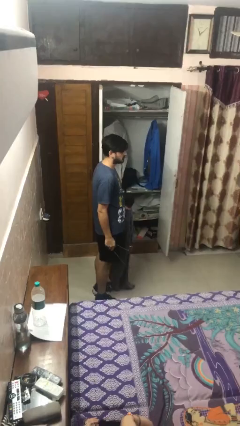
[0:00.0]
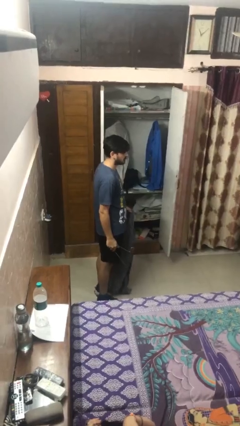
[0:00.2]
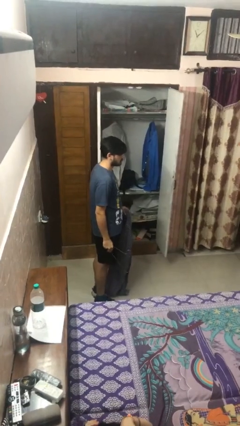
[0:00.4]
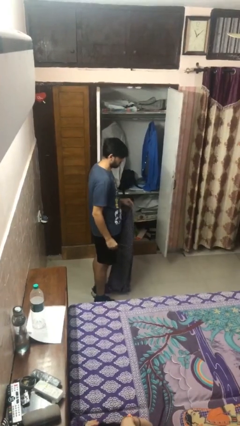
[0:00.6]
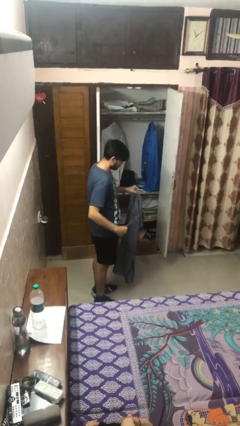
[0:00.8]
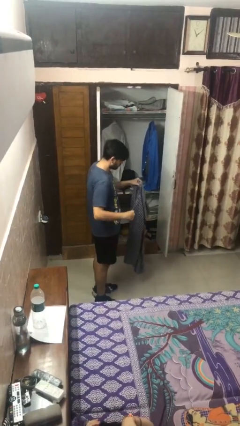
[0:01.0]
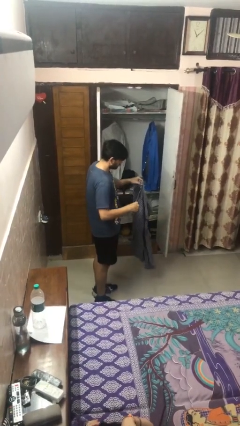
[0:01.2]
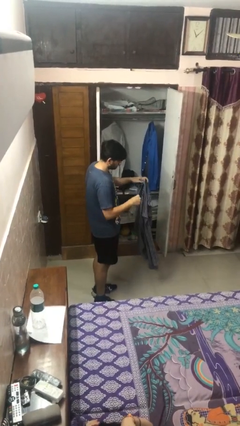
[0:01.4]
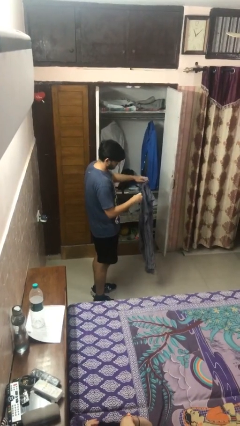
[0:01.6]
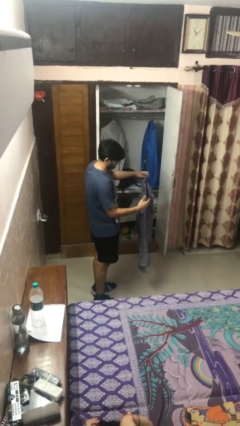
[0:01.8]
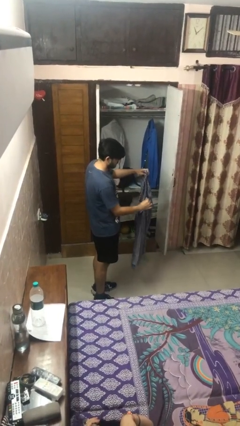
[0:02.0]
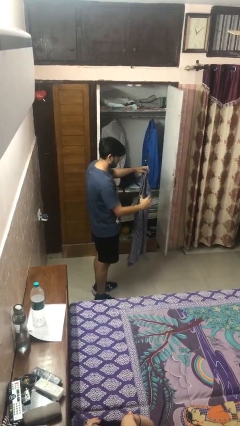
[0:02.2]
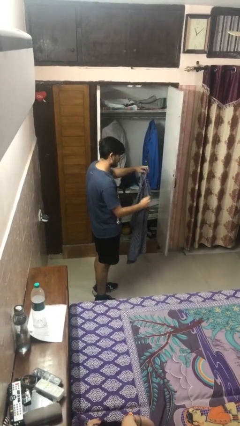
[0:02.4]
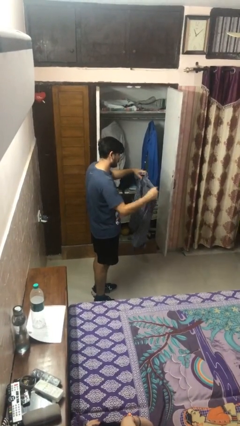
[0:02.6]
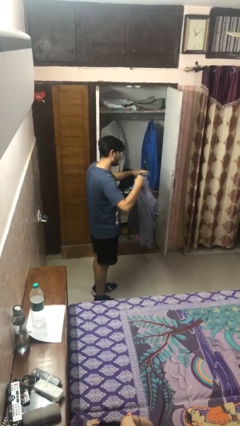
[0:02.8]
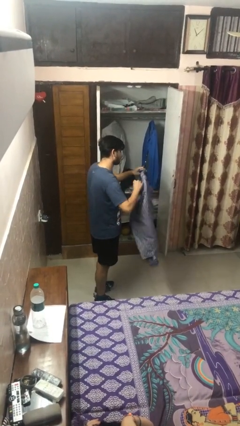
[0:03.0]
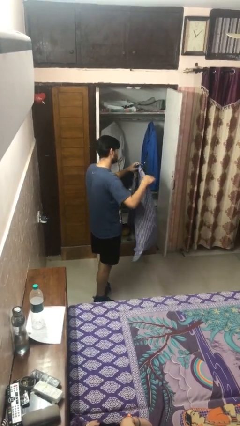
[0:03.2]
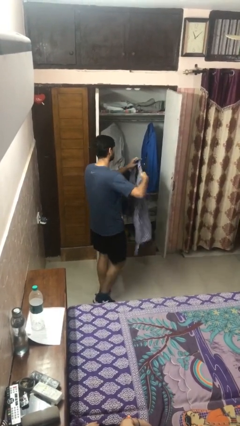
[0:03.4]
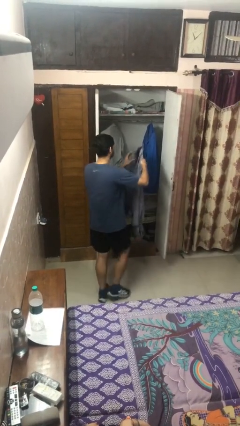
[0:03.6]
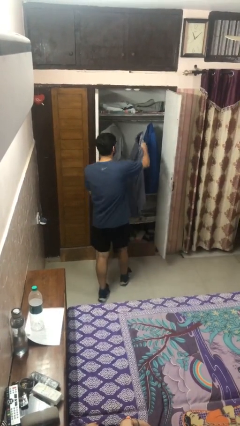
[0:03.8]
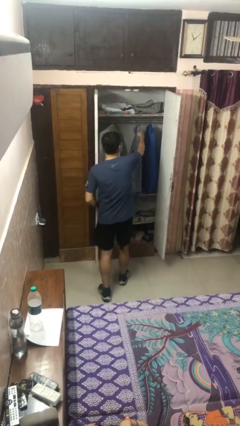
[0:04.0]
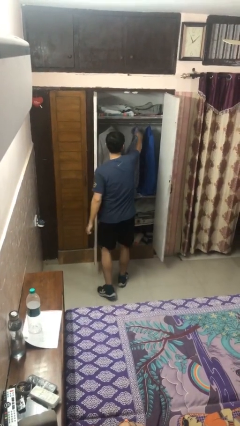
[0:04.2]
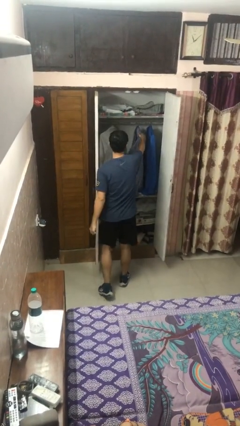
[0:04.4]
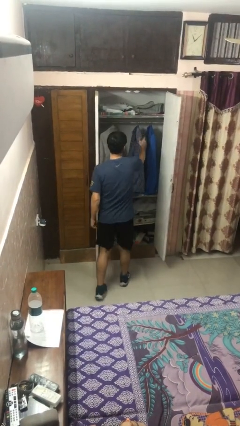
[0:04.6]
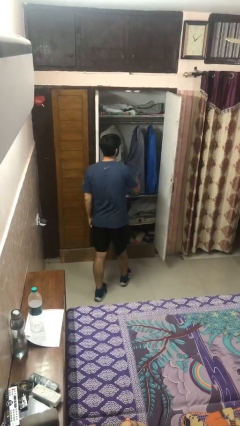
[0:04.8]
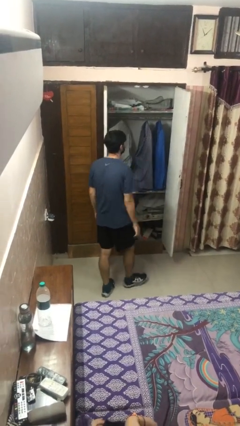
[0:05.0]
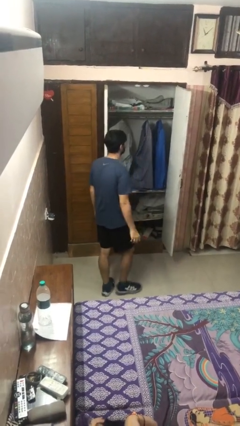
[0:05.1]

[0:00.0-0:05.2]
person puts clothes into closet

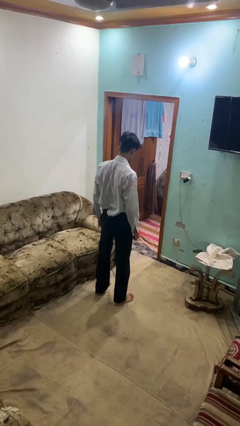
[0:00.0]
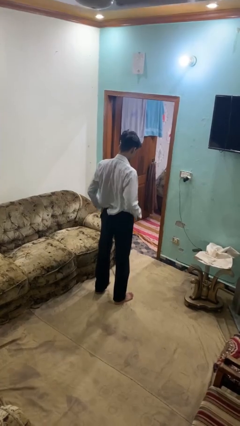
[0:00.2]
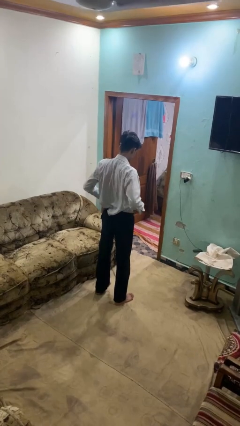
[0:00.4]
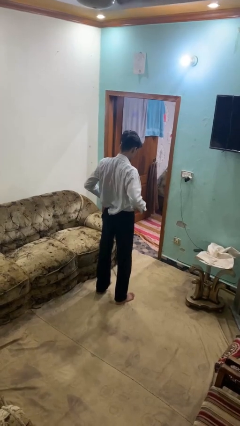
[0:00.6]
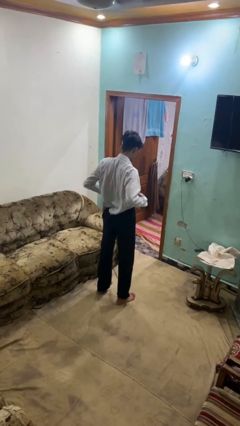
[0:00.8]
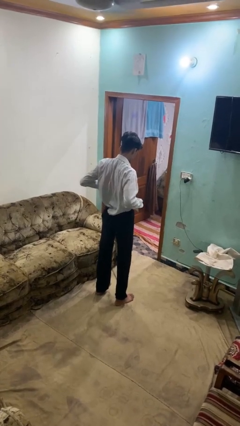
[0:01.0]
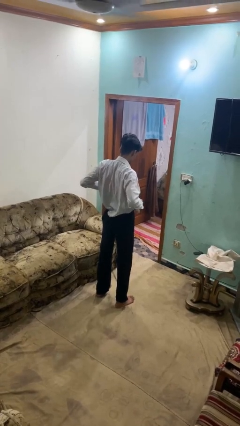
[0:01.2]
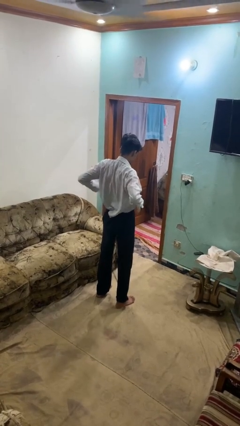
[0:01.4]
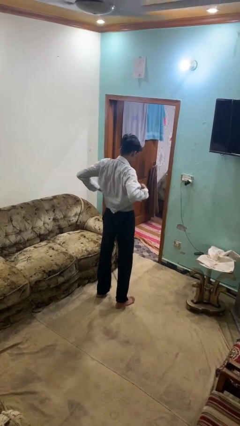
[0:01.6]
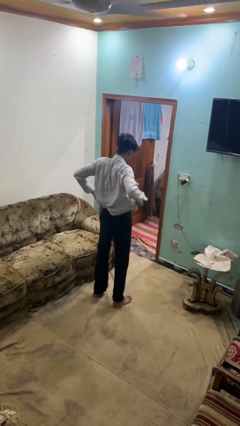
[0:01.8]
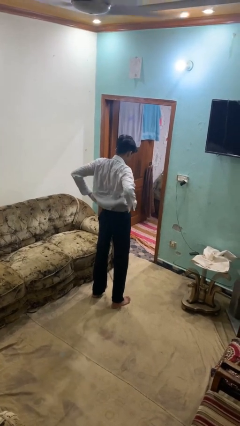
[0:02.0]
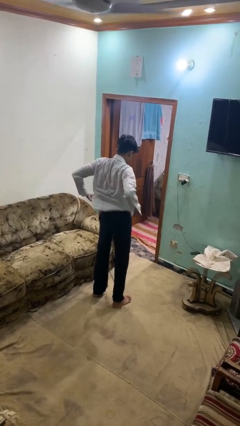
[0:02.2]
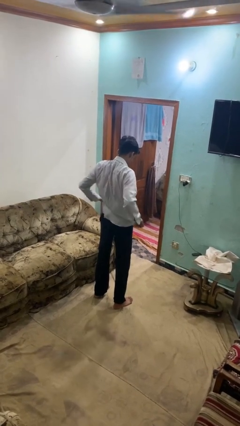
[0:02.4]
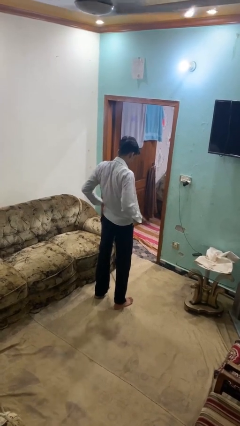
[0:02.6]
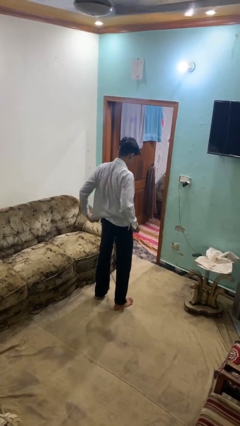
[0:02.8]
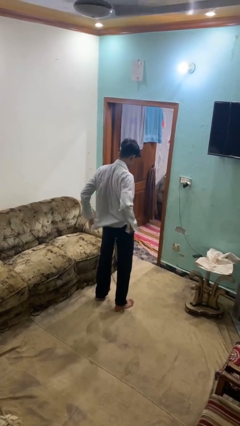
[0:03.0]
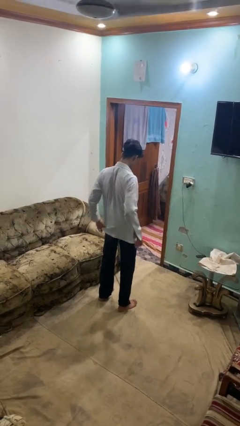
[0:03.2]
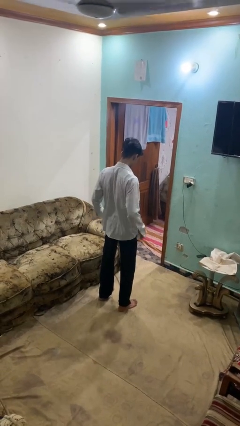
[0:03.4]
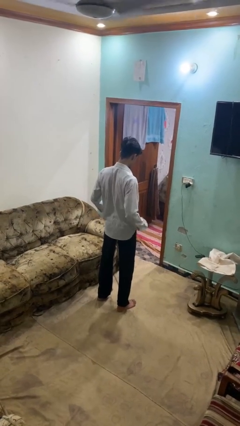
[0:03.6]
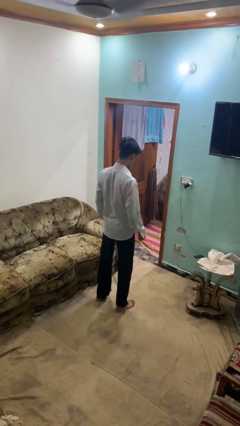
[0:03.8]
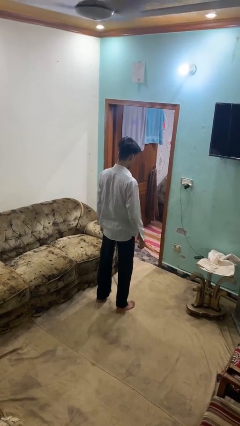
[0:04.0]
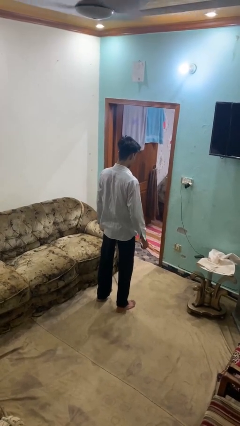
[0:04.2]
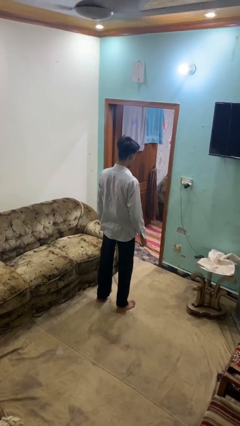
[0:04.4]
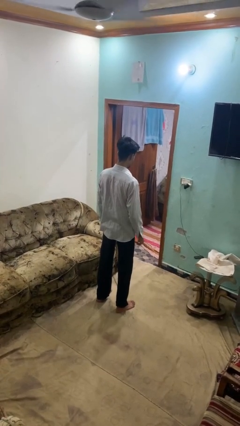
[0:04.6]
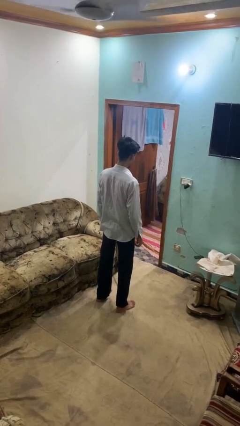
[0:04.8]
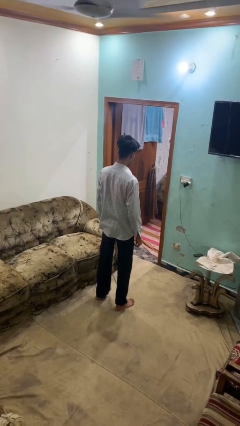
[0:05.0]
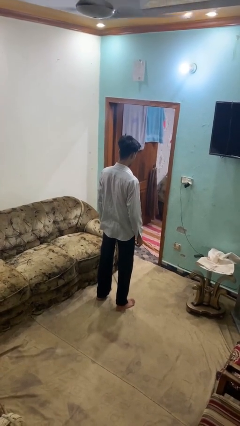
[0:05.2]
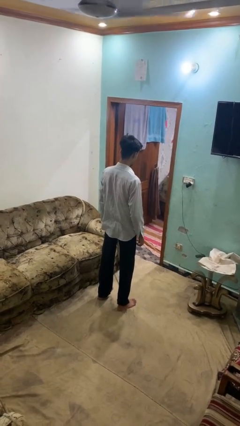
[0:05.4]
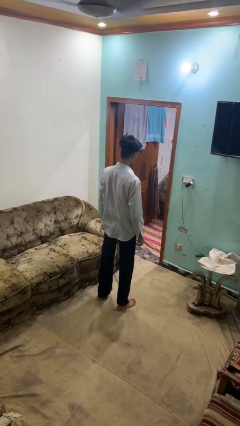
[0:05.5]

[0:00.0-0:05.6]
person untucks shirt

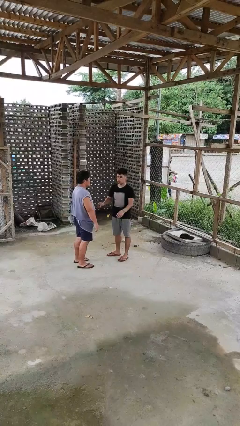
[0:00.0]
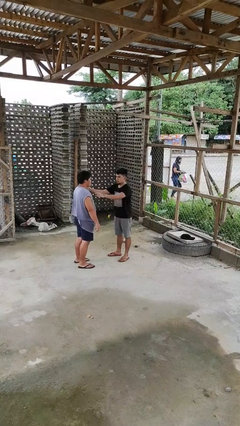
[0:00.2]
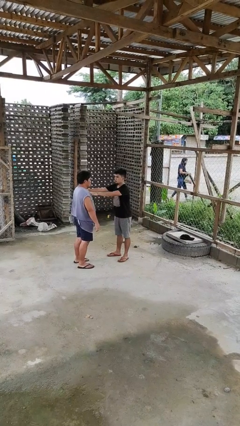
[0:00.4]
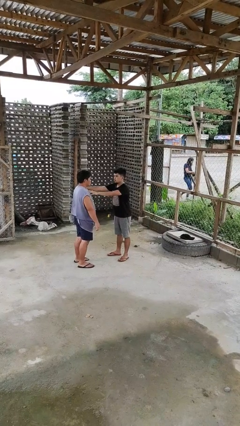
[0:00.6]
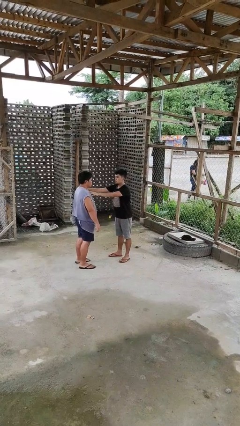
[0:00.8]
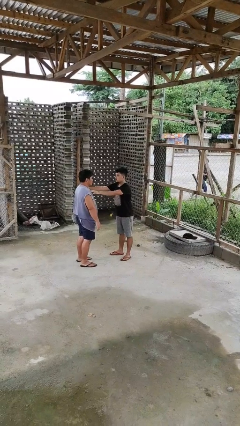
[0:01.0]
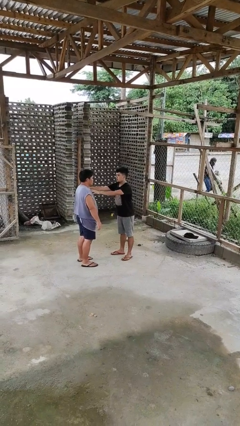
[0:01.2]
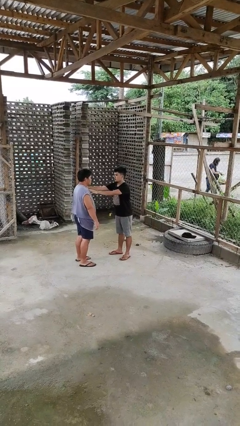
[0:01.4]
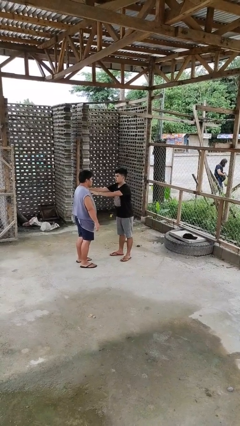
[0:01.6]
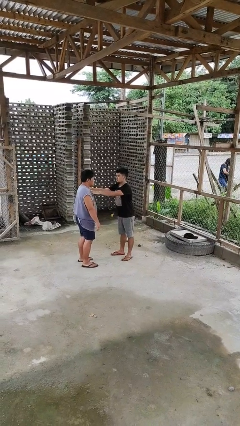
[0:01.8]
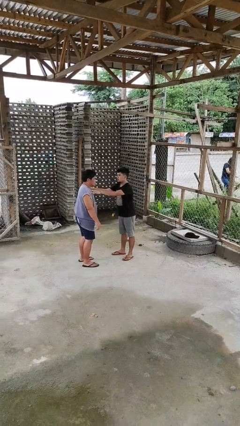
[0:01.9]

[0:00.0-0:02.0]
person grabs person by shoulder

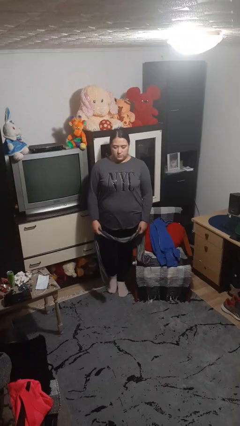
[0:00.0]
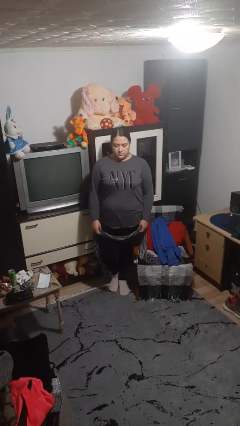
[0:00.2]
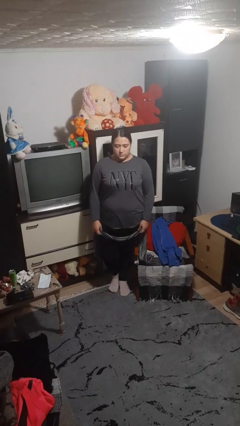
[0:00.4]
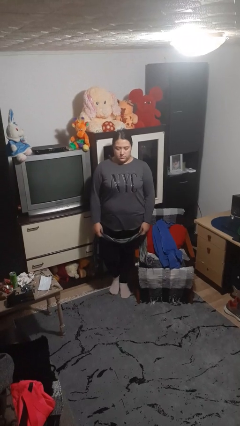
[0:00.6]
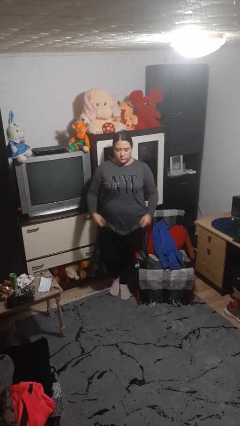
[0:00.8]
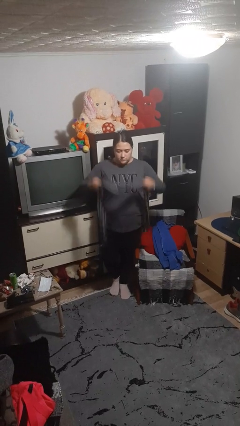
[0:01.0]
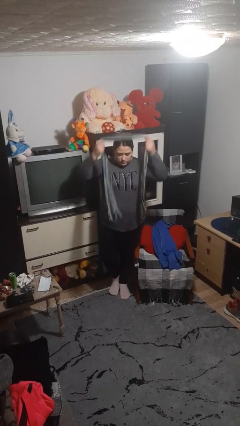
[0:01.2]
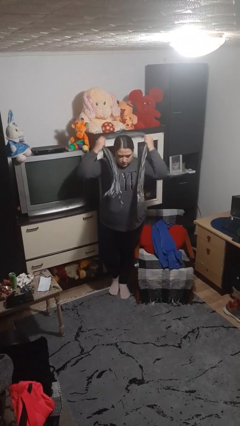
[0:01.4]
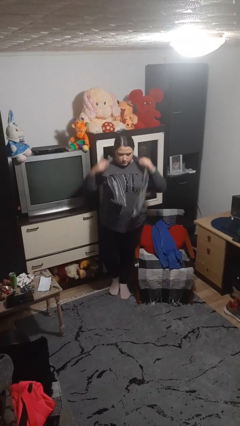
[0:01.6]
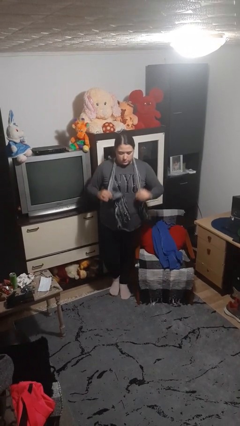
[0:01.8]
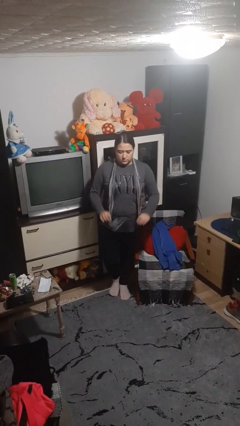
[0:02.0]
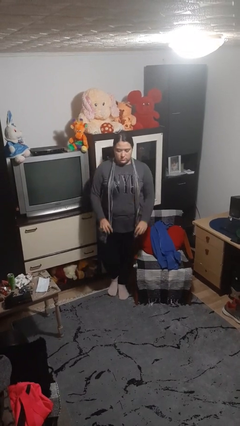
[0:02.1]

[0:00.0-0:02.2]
person puts on scarf

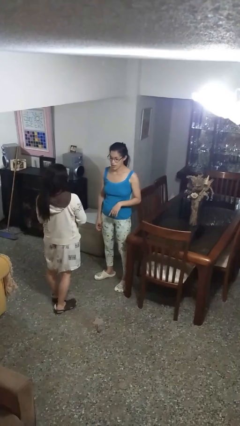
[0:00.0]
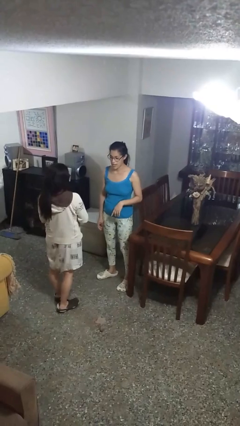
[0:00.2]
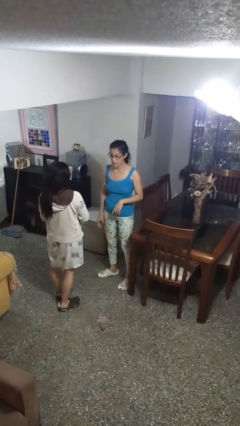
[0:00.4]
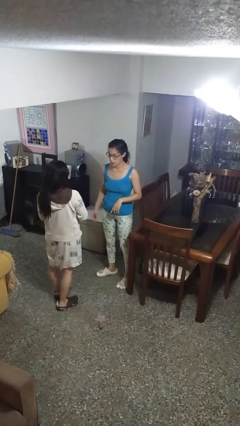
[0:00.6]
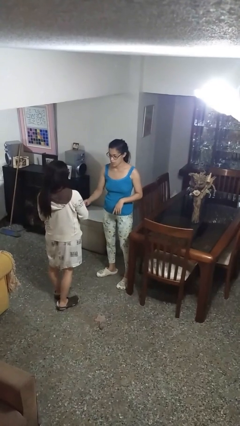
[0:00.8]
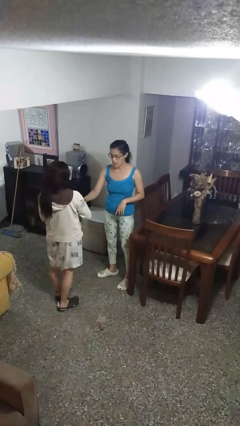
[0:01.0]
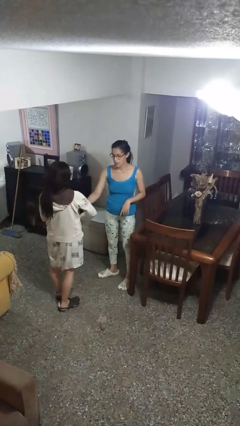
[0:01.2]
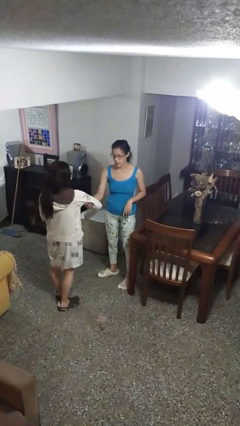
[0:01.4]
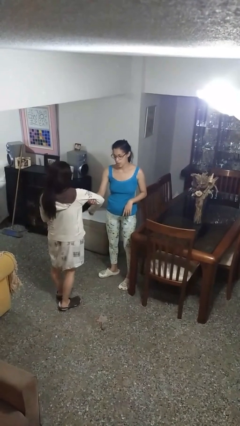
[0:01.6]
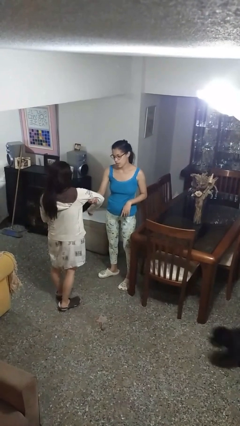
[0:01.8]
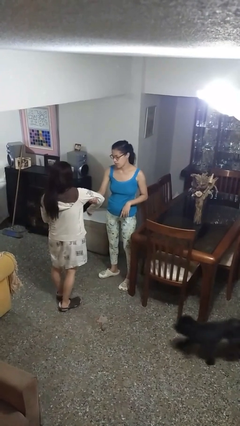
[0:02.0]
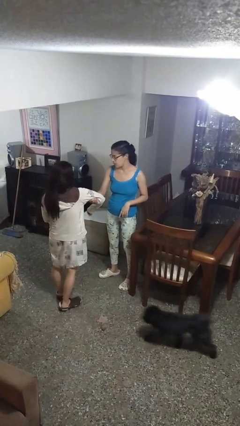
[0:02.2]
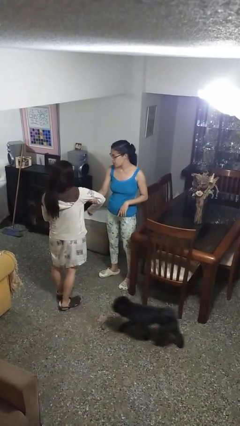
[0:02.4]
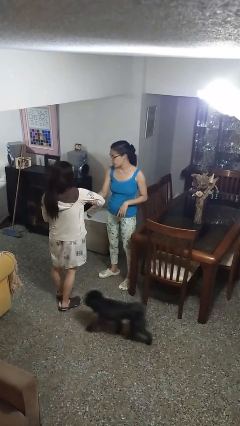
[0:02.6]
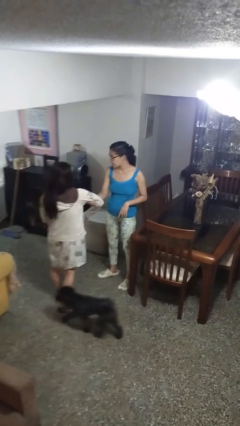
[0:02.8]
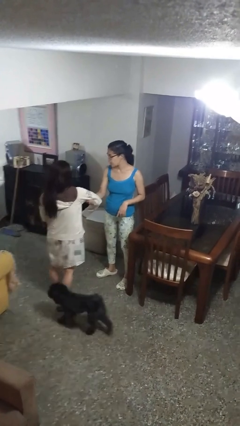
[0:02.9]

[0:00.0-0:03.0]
person grabs person by bicep
